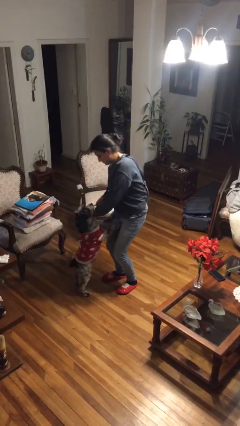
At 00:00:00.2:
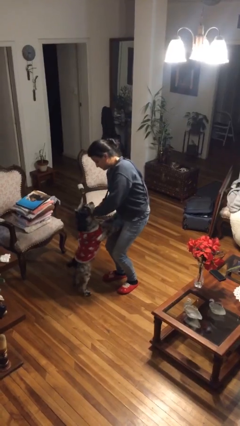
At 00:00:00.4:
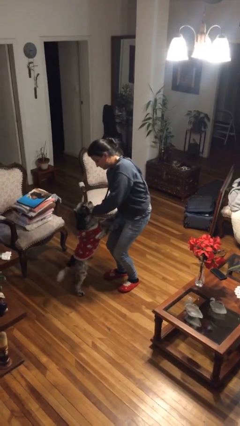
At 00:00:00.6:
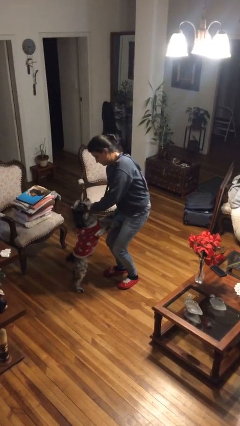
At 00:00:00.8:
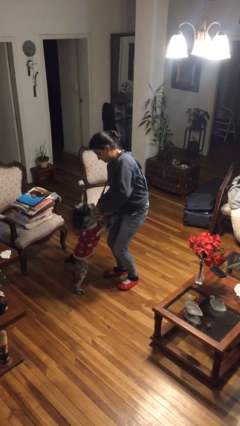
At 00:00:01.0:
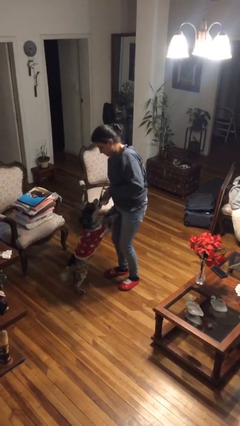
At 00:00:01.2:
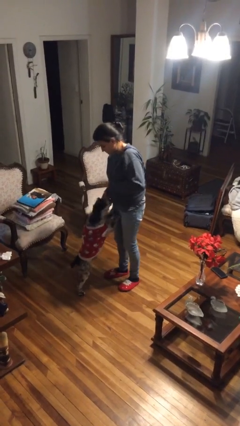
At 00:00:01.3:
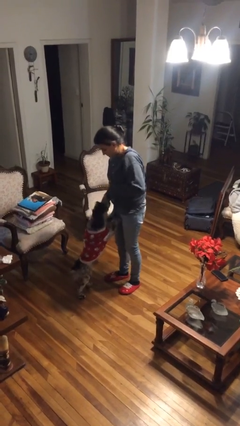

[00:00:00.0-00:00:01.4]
person attaches leash to dog

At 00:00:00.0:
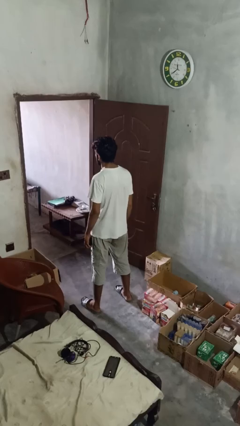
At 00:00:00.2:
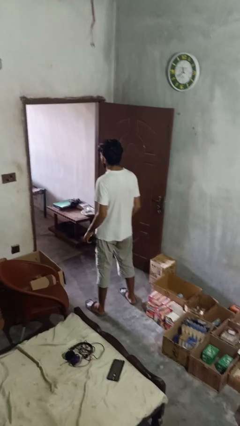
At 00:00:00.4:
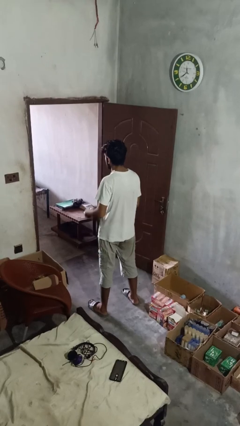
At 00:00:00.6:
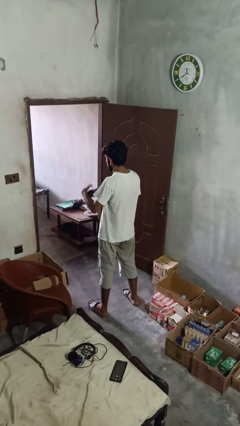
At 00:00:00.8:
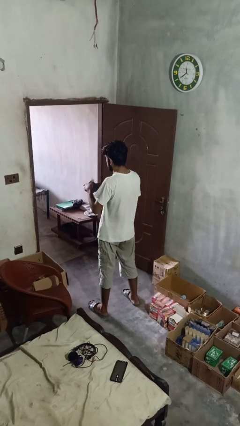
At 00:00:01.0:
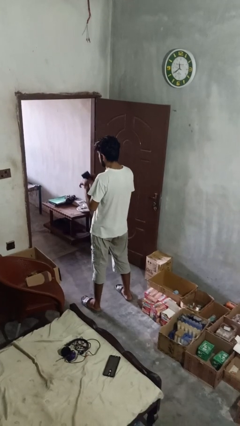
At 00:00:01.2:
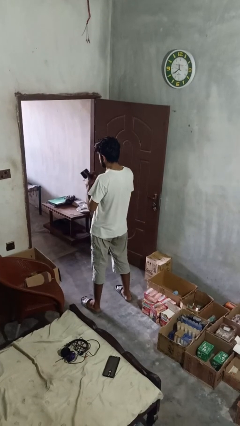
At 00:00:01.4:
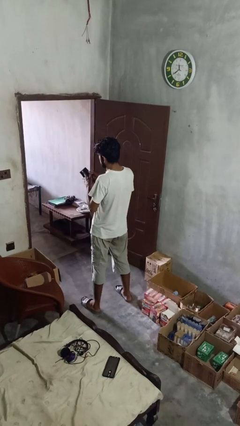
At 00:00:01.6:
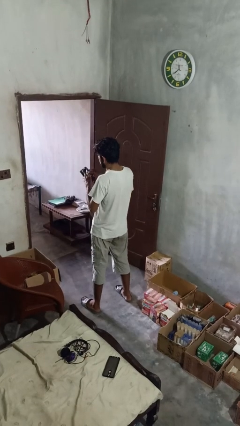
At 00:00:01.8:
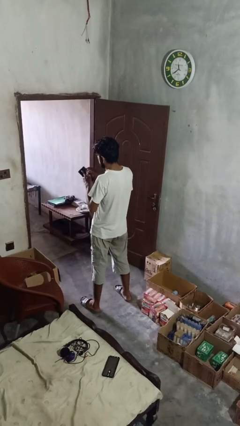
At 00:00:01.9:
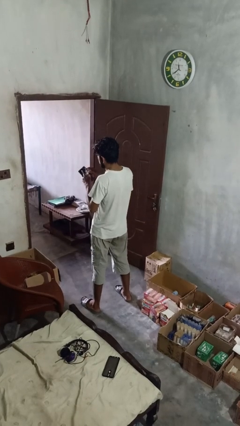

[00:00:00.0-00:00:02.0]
person searches in purse

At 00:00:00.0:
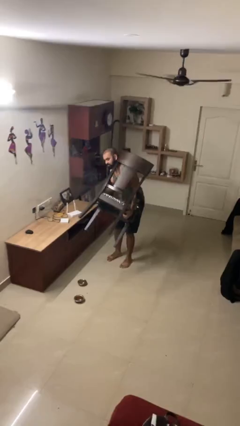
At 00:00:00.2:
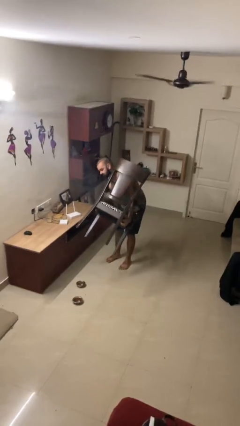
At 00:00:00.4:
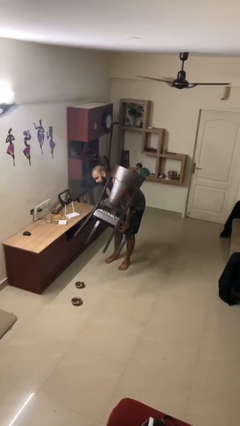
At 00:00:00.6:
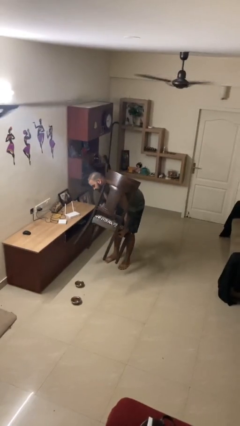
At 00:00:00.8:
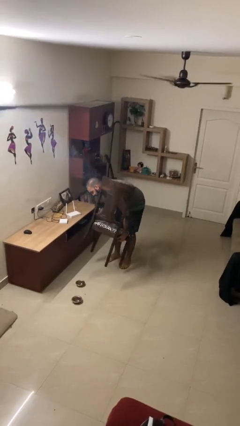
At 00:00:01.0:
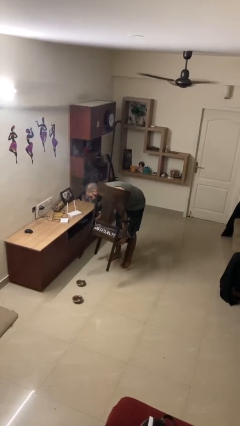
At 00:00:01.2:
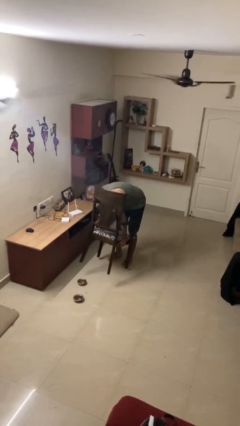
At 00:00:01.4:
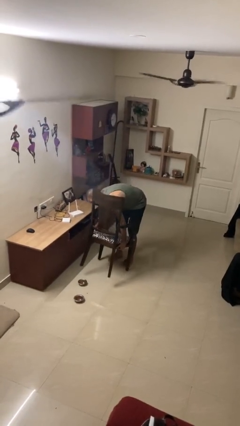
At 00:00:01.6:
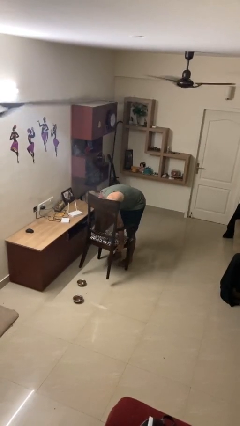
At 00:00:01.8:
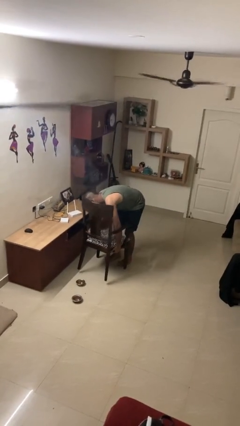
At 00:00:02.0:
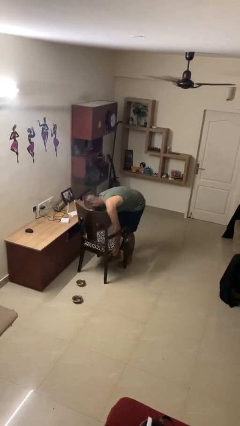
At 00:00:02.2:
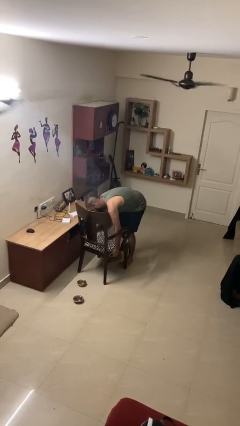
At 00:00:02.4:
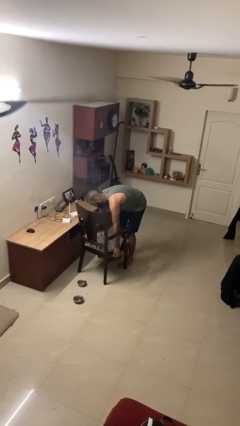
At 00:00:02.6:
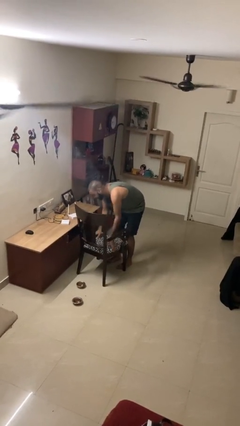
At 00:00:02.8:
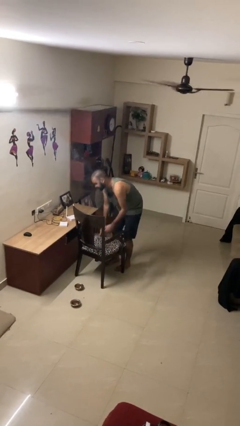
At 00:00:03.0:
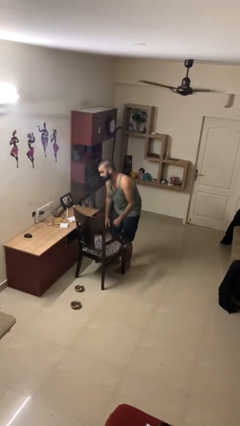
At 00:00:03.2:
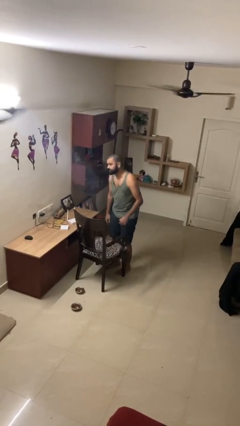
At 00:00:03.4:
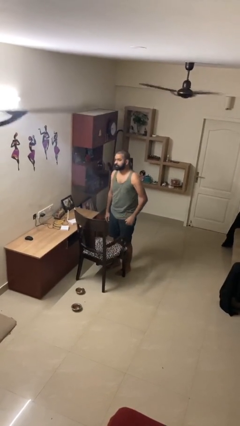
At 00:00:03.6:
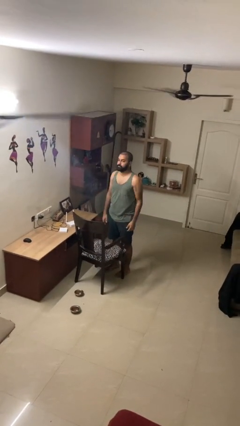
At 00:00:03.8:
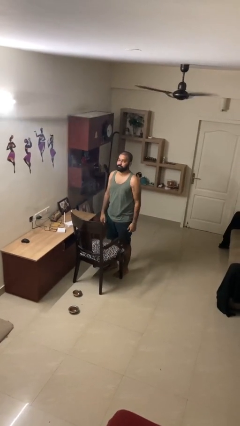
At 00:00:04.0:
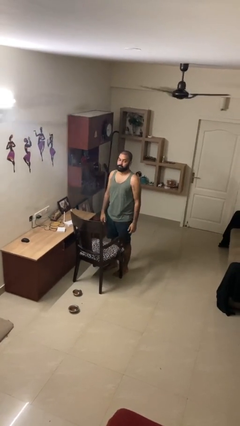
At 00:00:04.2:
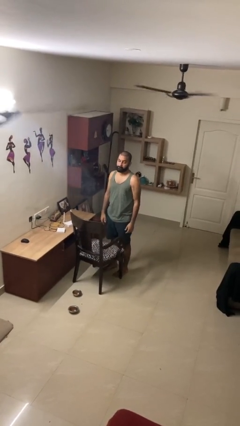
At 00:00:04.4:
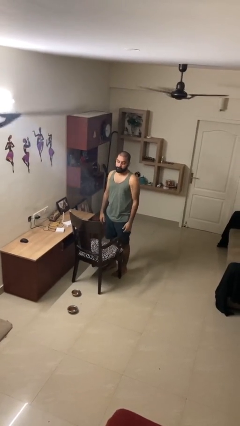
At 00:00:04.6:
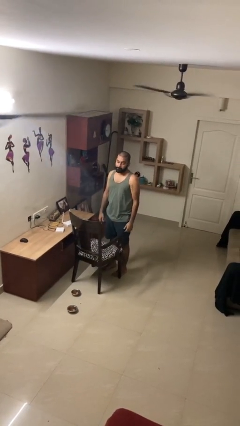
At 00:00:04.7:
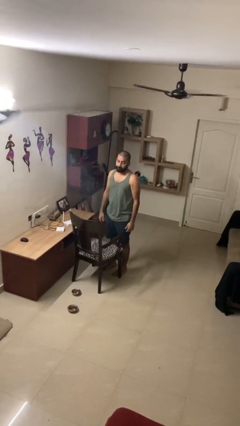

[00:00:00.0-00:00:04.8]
person puts down object on floor

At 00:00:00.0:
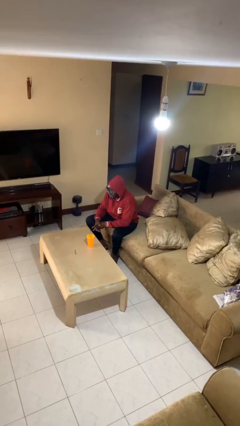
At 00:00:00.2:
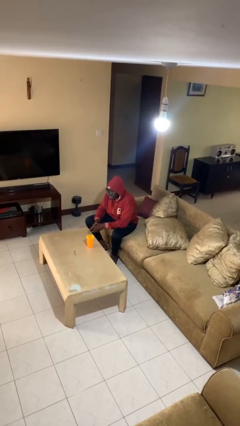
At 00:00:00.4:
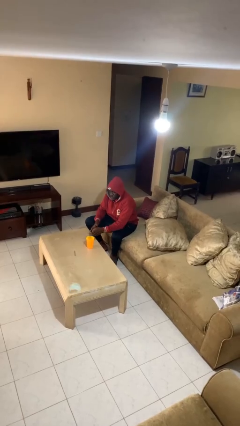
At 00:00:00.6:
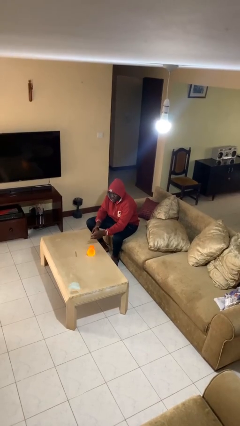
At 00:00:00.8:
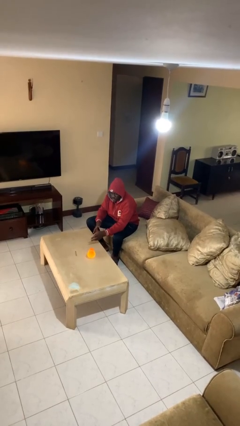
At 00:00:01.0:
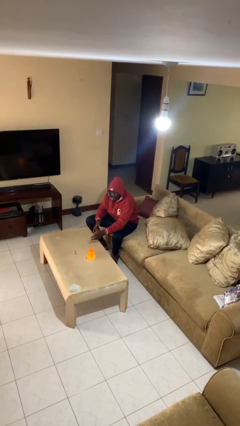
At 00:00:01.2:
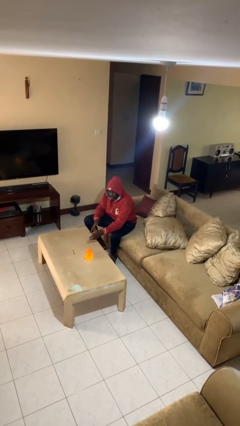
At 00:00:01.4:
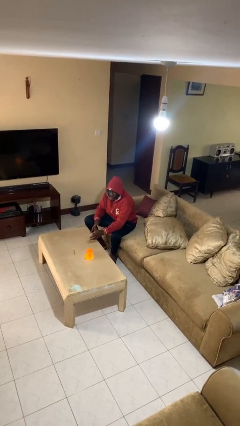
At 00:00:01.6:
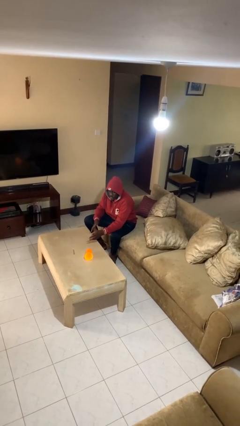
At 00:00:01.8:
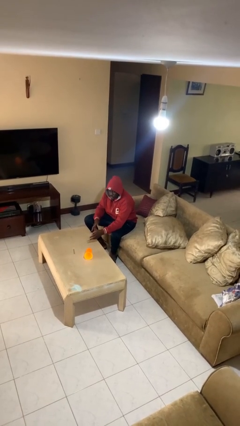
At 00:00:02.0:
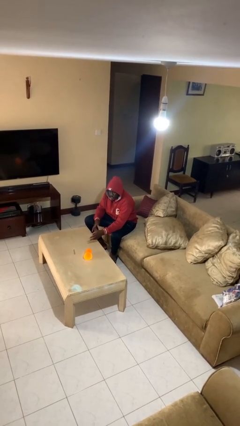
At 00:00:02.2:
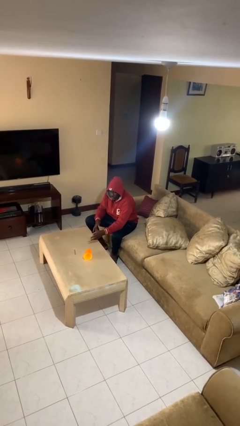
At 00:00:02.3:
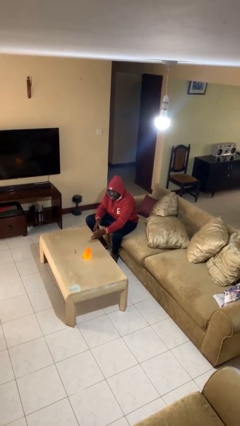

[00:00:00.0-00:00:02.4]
person knocks over glass

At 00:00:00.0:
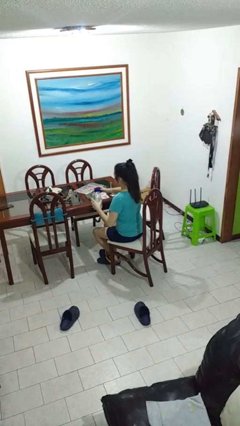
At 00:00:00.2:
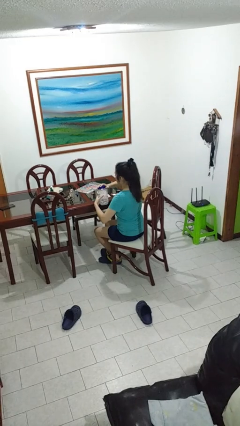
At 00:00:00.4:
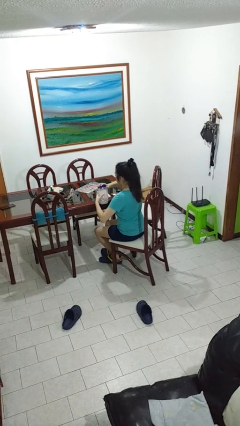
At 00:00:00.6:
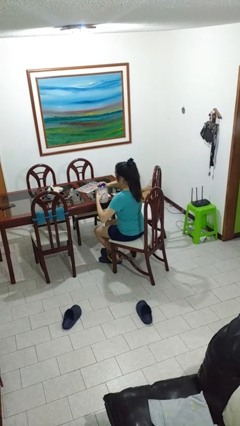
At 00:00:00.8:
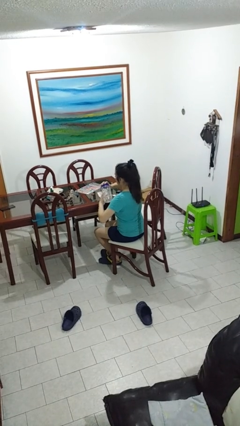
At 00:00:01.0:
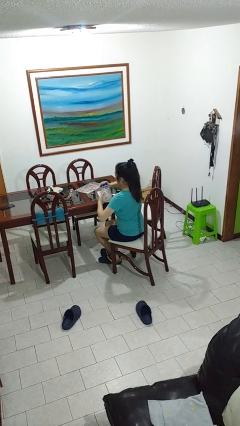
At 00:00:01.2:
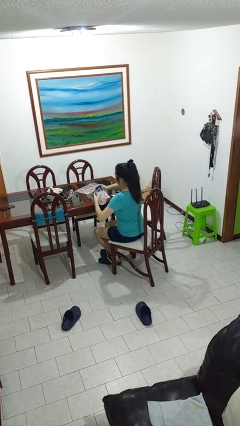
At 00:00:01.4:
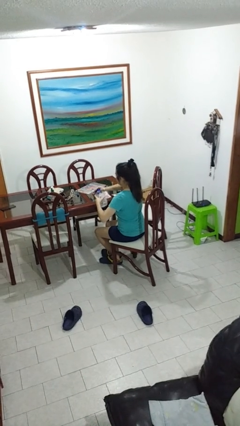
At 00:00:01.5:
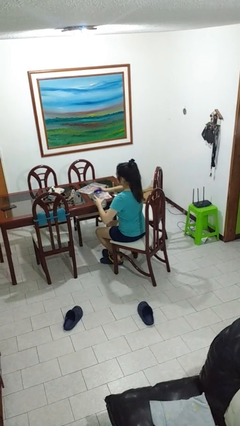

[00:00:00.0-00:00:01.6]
person closes jar

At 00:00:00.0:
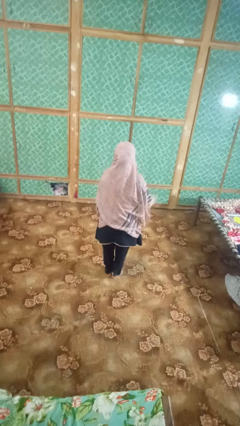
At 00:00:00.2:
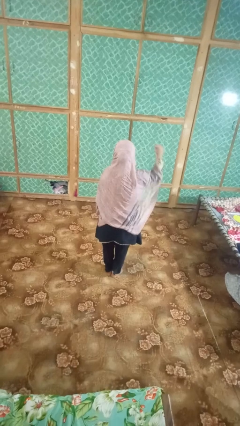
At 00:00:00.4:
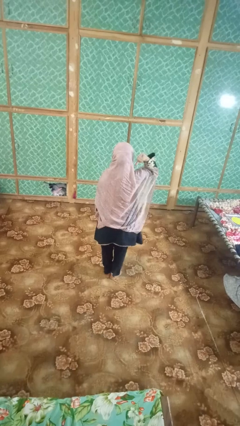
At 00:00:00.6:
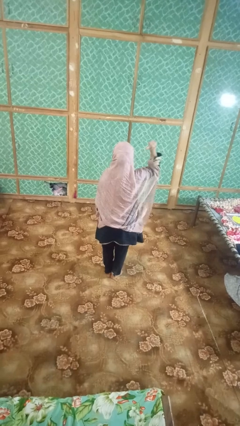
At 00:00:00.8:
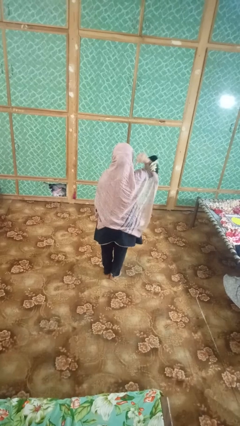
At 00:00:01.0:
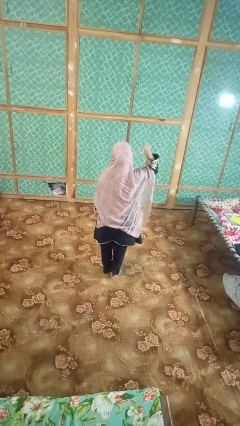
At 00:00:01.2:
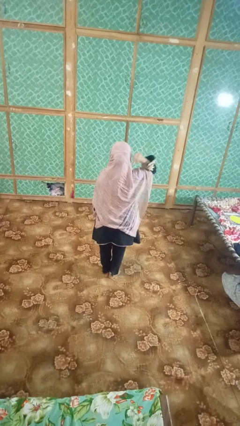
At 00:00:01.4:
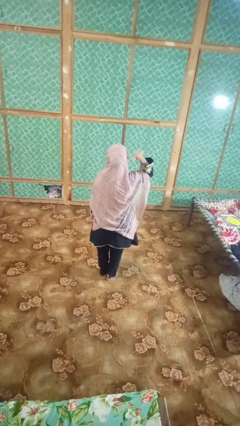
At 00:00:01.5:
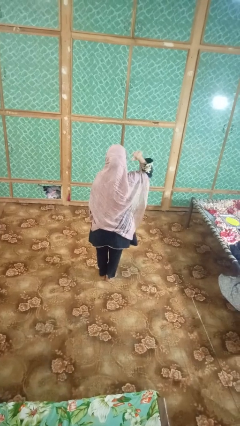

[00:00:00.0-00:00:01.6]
person gestures behind me

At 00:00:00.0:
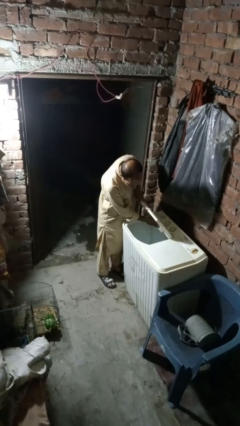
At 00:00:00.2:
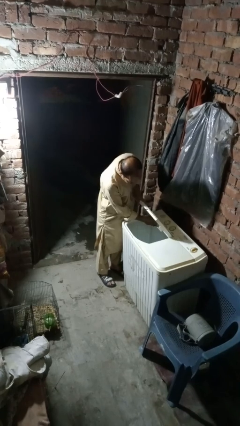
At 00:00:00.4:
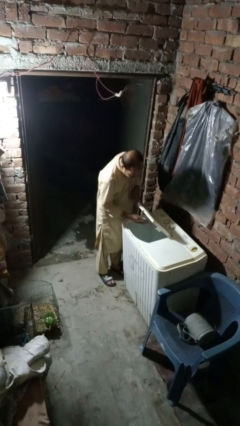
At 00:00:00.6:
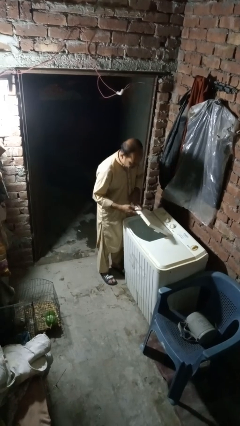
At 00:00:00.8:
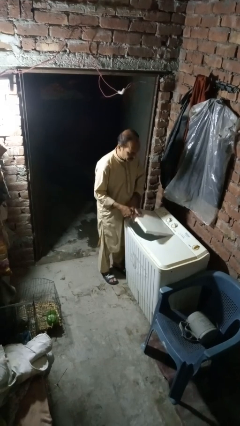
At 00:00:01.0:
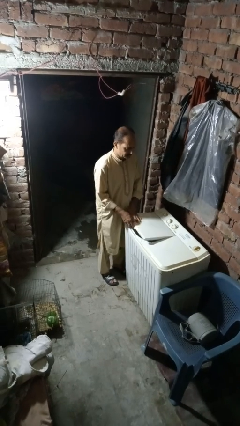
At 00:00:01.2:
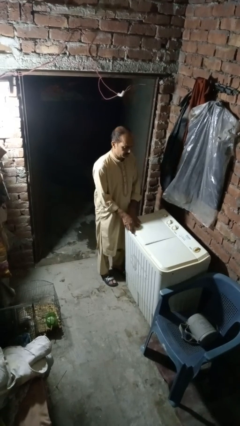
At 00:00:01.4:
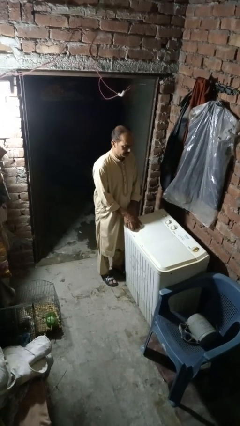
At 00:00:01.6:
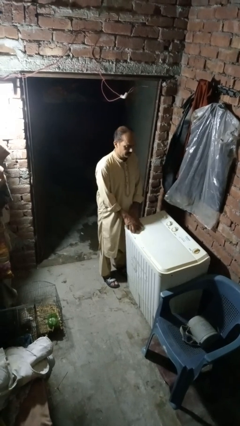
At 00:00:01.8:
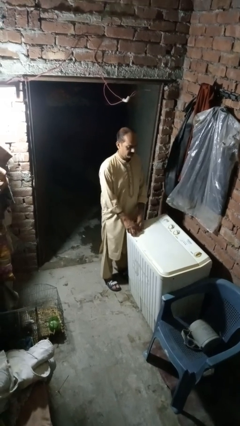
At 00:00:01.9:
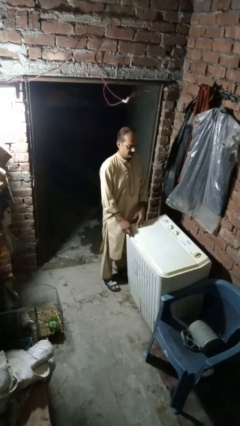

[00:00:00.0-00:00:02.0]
person closes clothes washer

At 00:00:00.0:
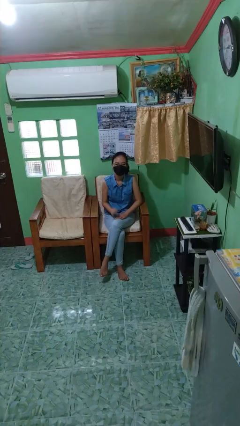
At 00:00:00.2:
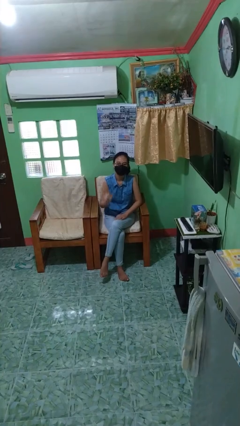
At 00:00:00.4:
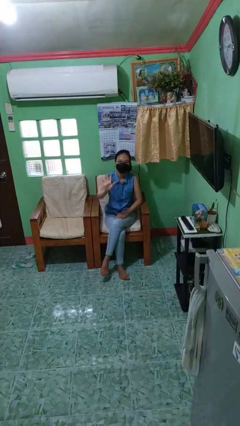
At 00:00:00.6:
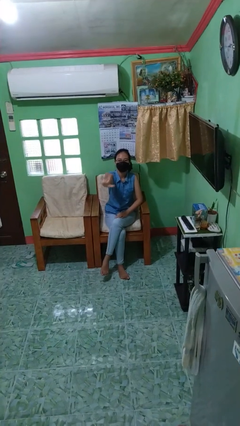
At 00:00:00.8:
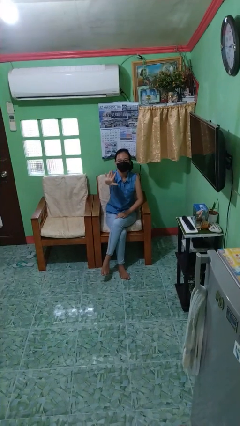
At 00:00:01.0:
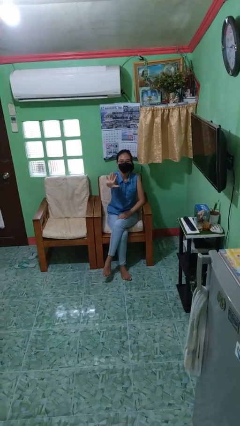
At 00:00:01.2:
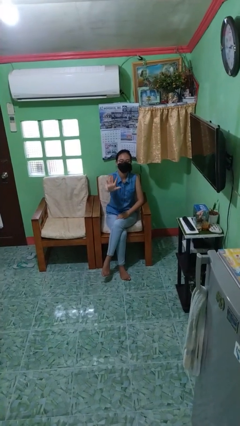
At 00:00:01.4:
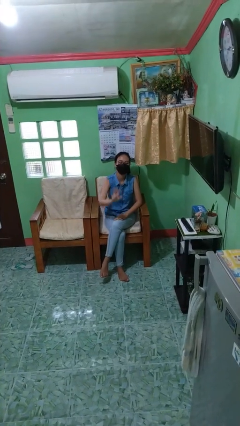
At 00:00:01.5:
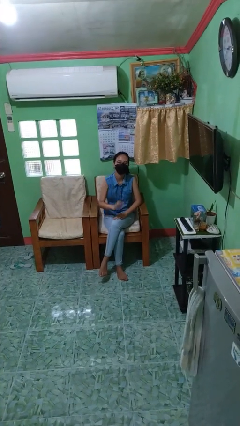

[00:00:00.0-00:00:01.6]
person gestures stop
